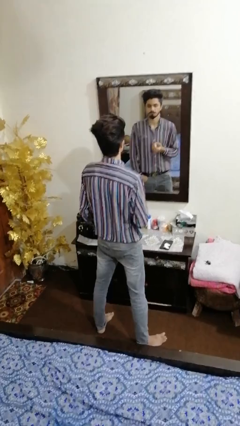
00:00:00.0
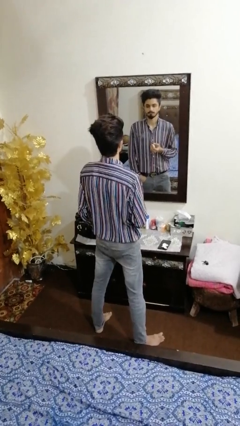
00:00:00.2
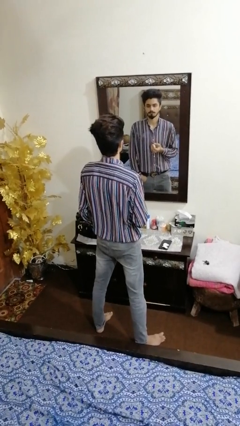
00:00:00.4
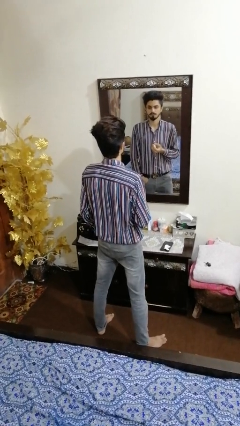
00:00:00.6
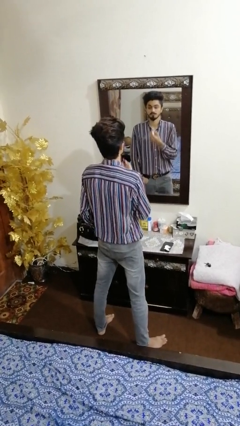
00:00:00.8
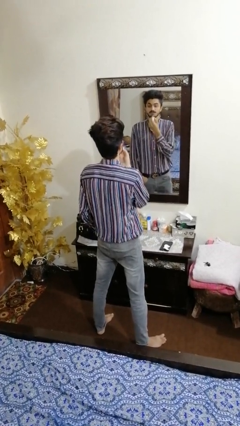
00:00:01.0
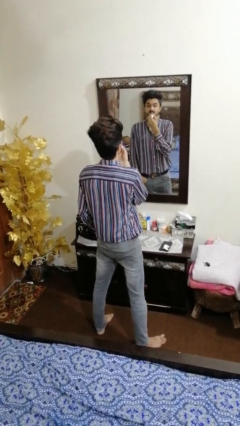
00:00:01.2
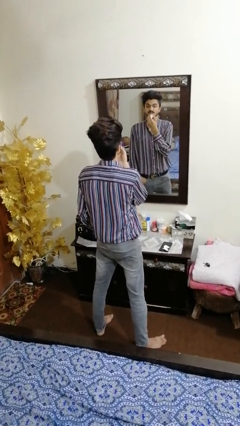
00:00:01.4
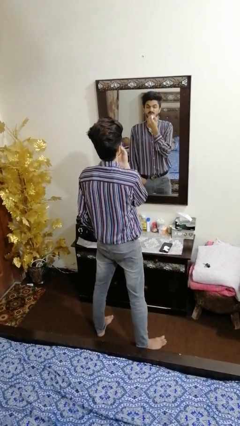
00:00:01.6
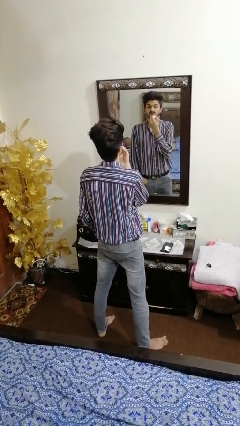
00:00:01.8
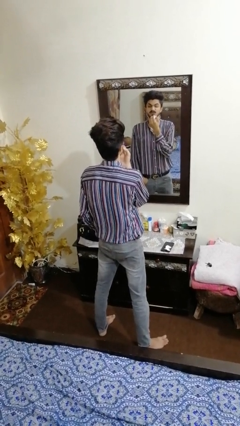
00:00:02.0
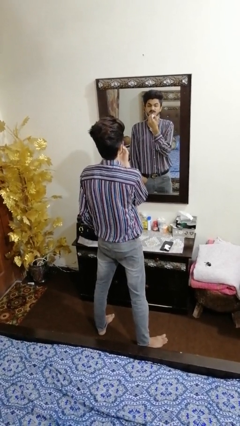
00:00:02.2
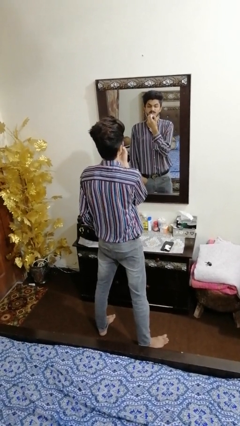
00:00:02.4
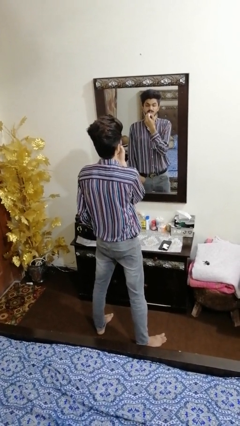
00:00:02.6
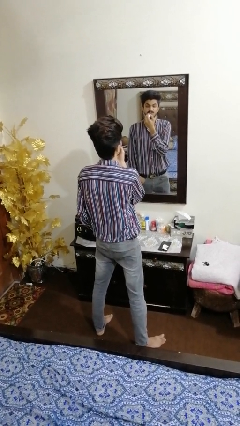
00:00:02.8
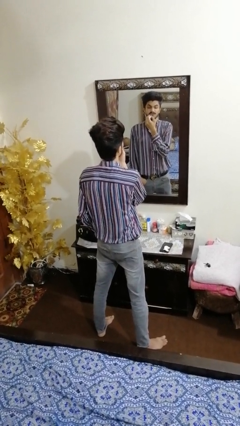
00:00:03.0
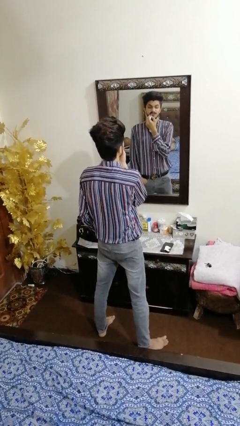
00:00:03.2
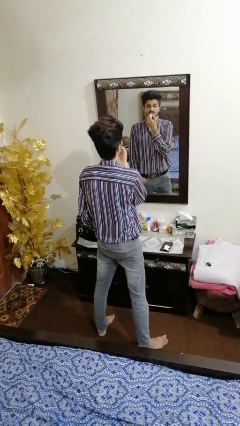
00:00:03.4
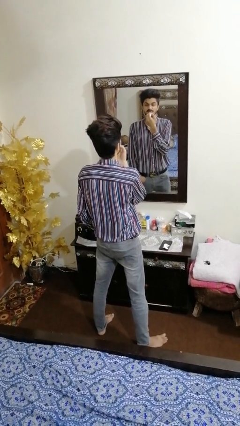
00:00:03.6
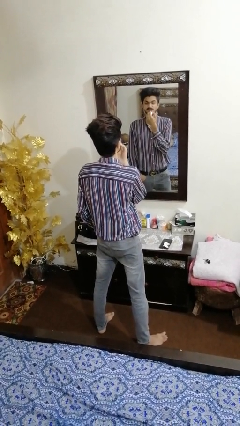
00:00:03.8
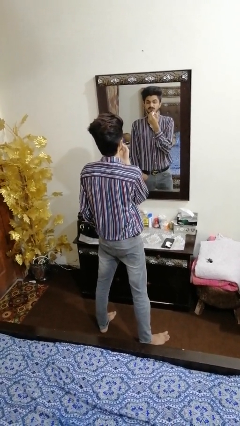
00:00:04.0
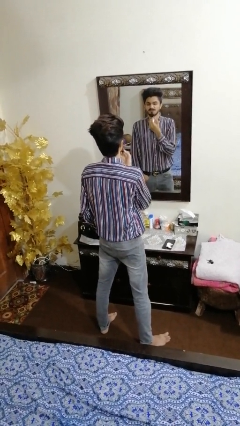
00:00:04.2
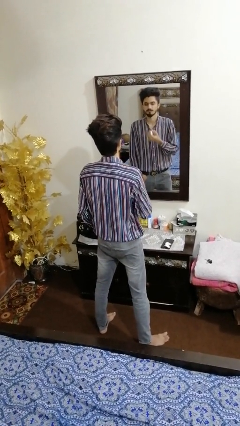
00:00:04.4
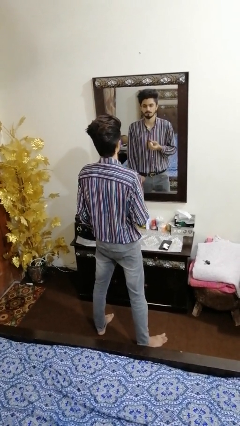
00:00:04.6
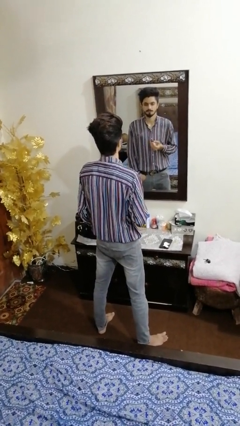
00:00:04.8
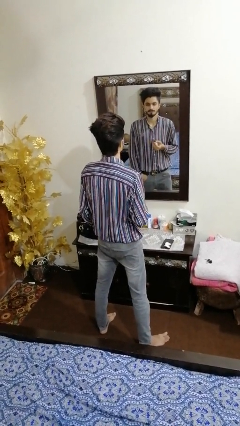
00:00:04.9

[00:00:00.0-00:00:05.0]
person applies lip makeup

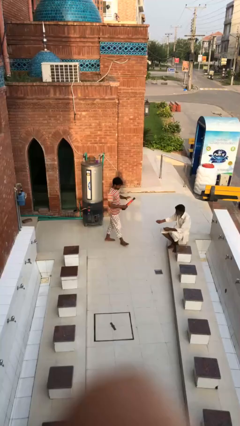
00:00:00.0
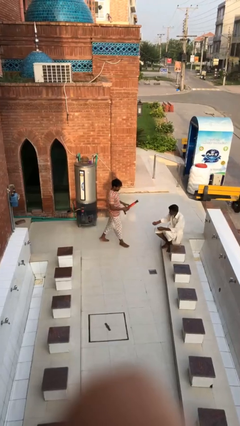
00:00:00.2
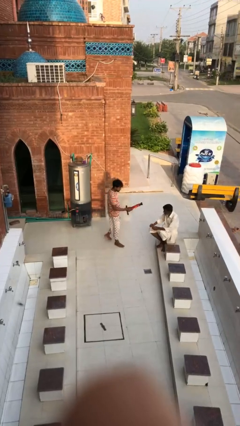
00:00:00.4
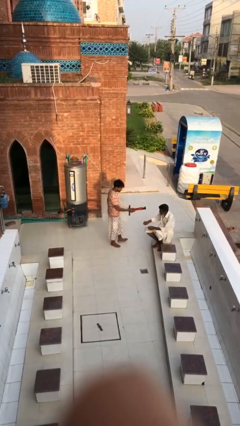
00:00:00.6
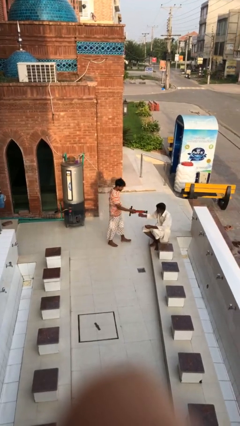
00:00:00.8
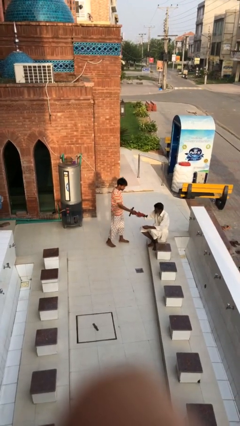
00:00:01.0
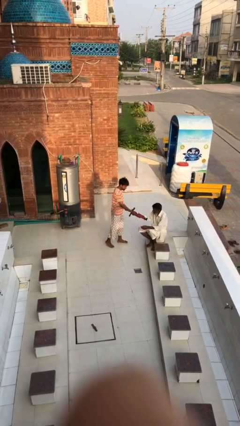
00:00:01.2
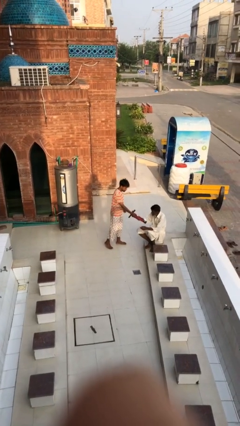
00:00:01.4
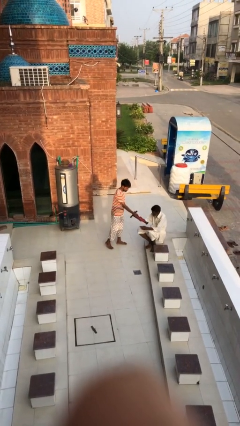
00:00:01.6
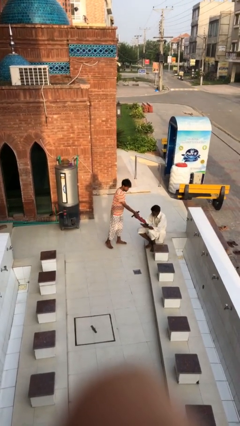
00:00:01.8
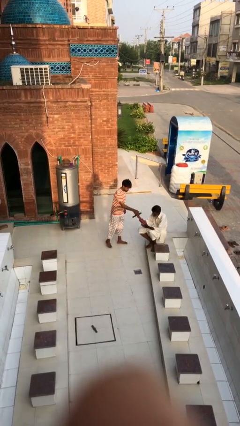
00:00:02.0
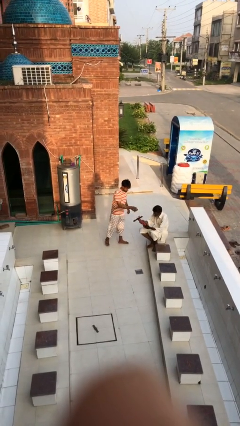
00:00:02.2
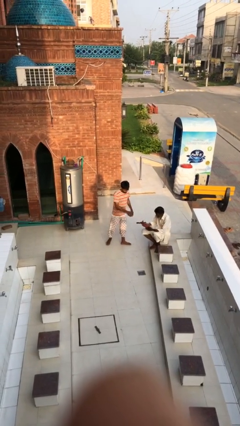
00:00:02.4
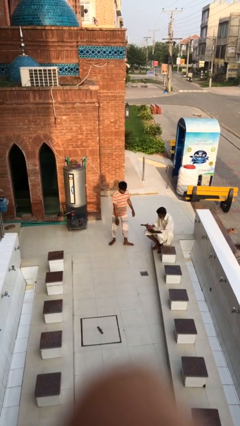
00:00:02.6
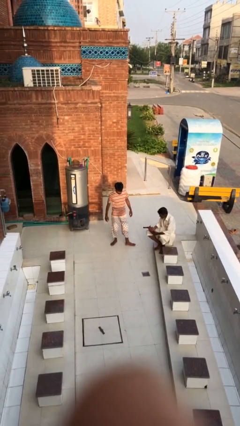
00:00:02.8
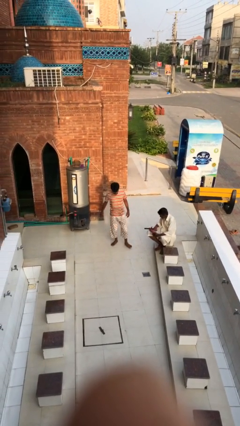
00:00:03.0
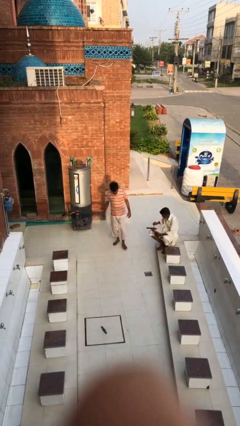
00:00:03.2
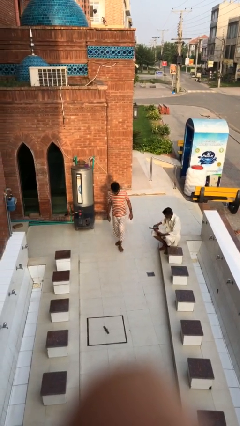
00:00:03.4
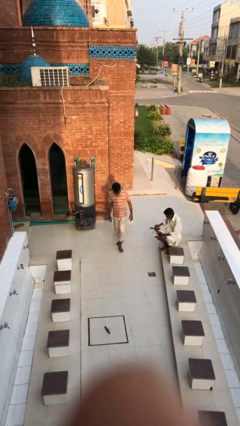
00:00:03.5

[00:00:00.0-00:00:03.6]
person transfers object to person

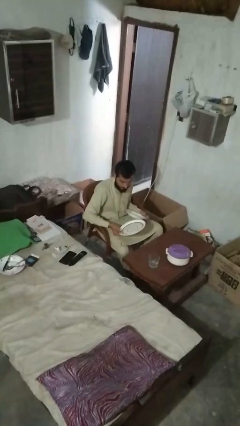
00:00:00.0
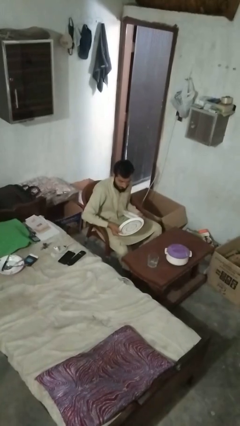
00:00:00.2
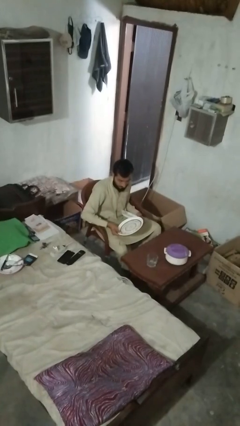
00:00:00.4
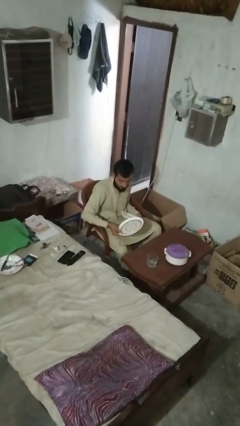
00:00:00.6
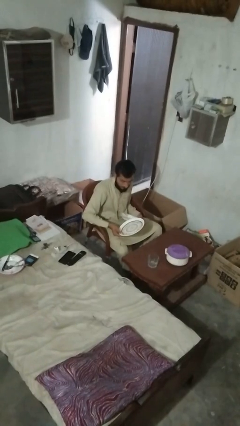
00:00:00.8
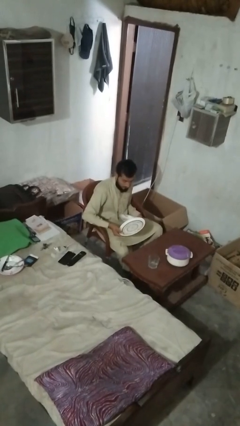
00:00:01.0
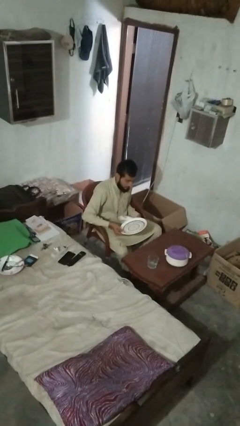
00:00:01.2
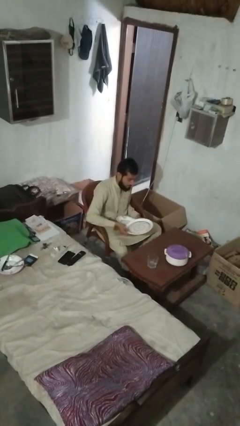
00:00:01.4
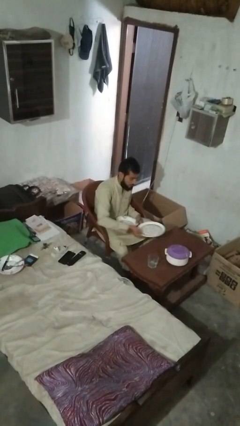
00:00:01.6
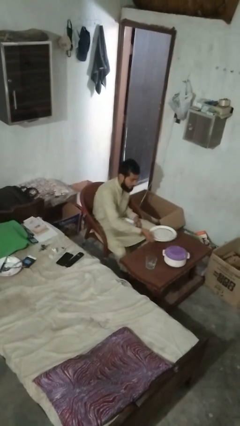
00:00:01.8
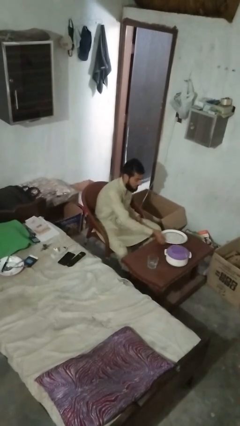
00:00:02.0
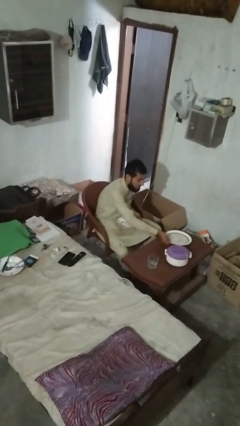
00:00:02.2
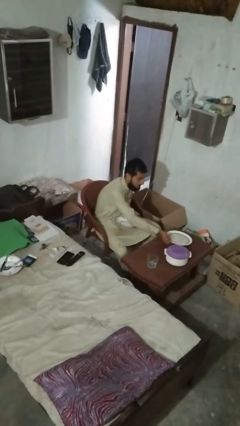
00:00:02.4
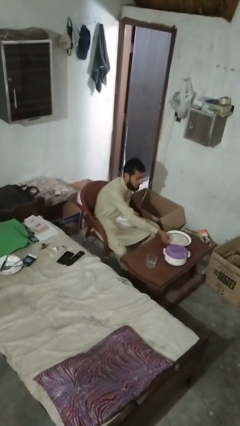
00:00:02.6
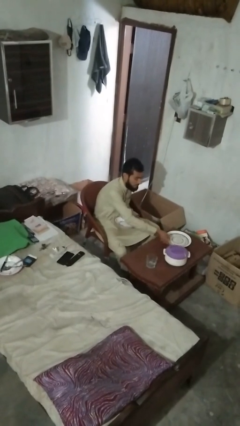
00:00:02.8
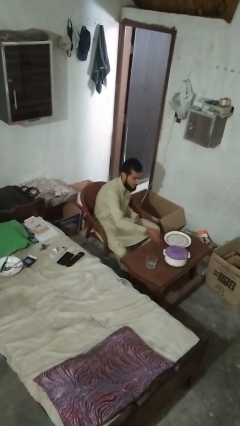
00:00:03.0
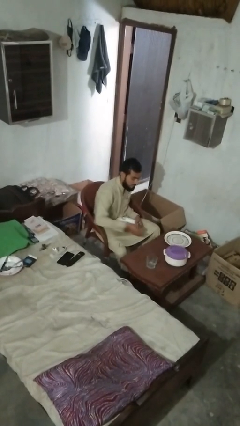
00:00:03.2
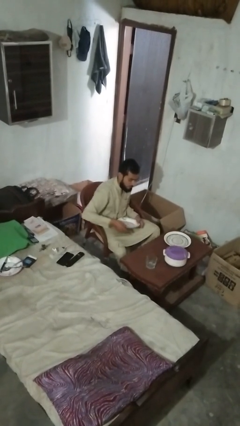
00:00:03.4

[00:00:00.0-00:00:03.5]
person sets table

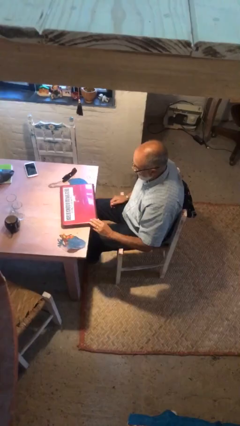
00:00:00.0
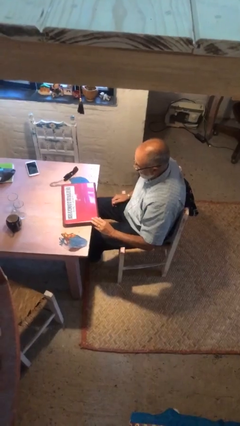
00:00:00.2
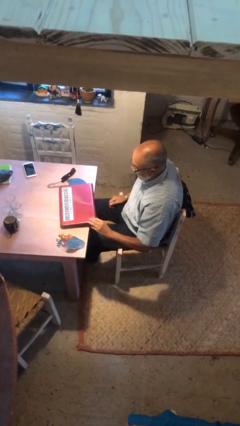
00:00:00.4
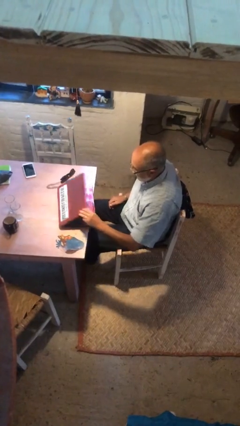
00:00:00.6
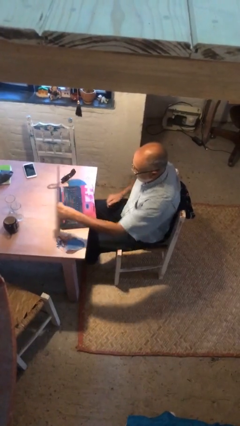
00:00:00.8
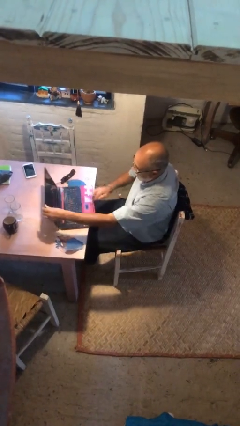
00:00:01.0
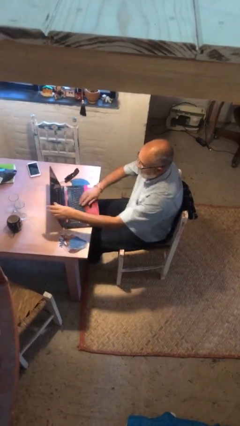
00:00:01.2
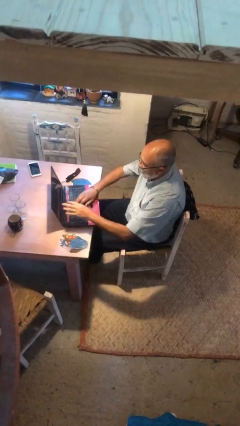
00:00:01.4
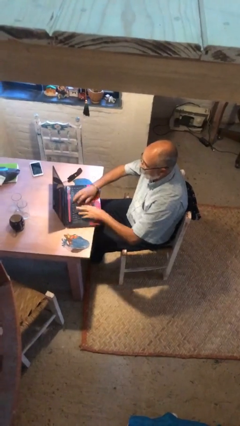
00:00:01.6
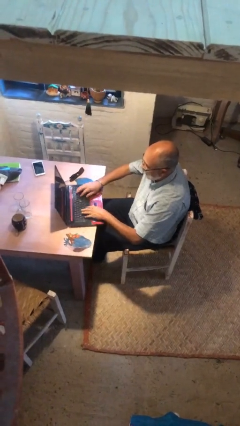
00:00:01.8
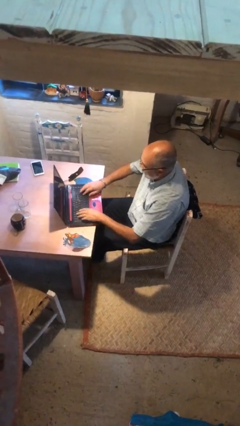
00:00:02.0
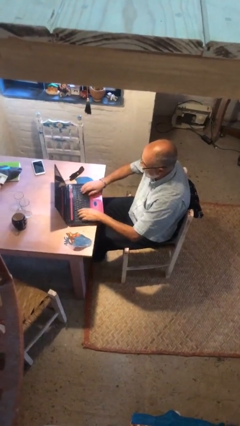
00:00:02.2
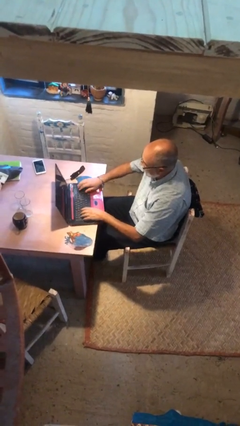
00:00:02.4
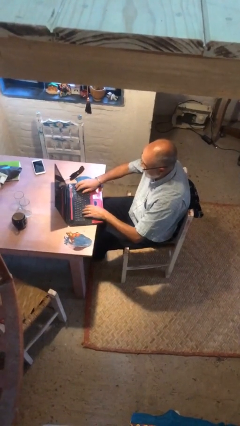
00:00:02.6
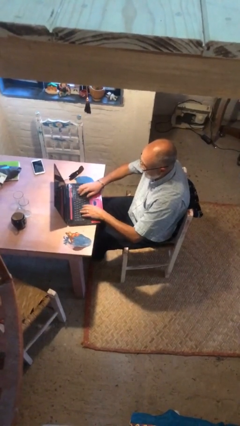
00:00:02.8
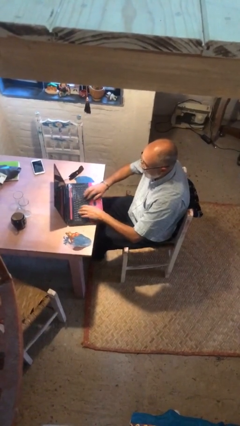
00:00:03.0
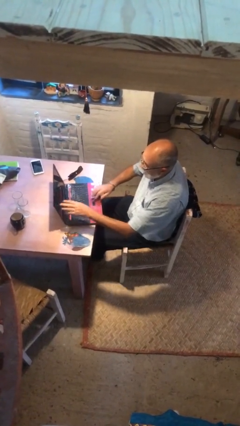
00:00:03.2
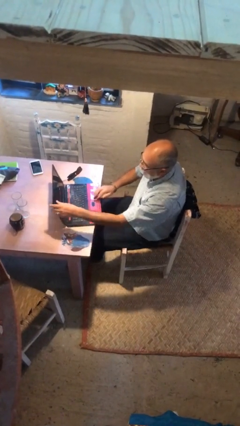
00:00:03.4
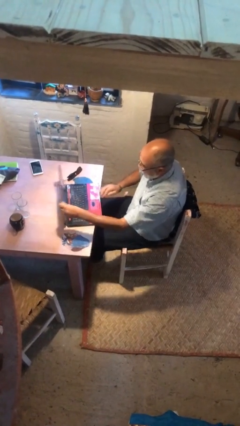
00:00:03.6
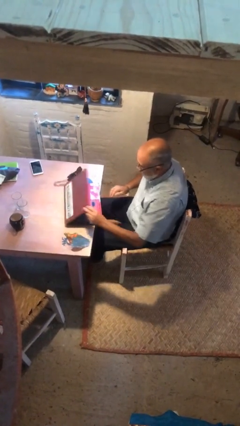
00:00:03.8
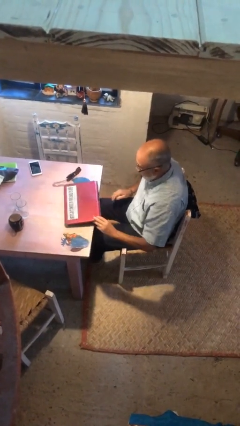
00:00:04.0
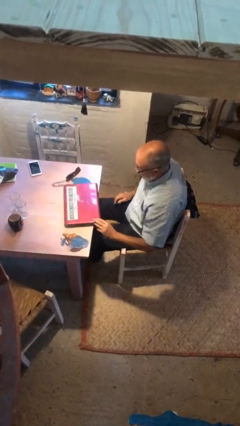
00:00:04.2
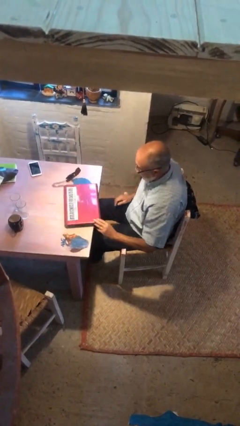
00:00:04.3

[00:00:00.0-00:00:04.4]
person interacts with laptop

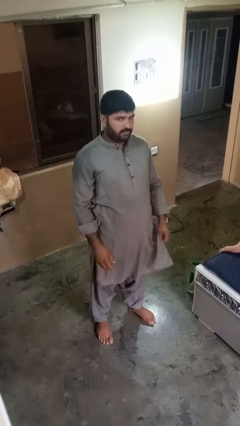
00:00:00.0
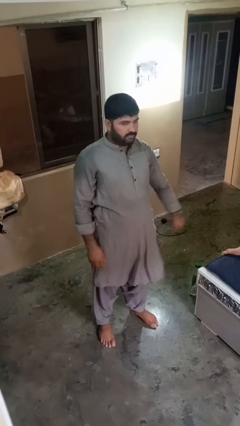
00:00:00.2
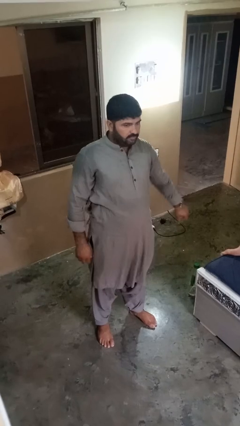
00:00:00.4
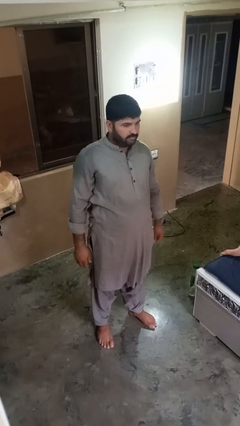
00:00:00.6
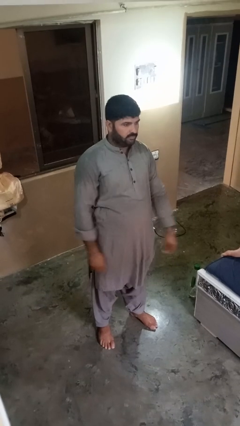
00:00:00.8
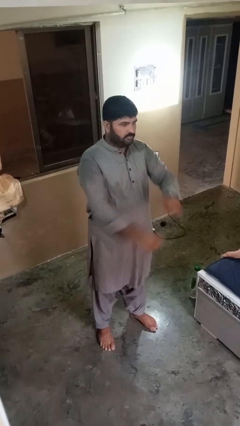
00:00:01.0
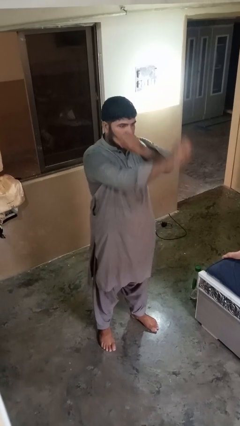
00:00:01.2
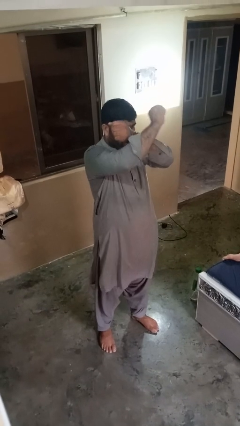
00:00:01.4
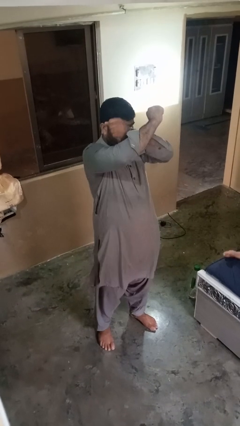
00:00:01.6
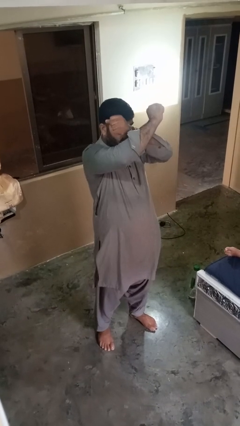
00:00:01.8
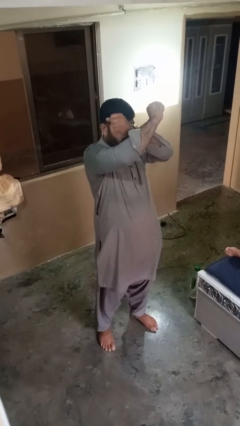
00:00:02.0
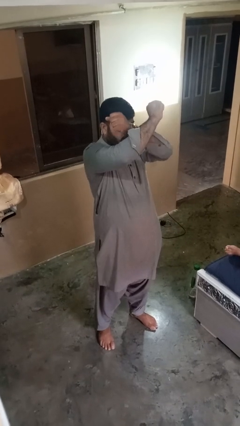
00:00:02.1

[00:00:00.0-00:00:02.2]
person gestures arms x
